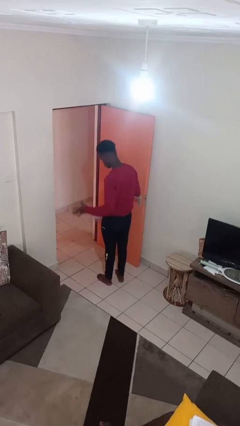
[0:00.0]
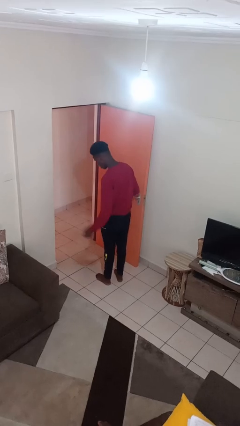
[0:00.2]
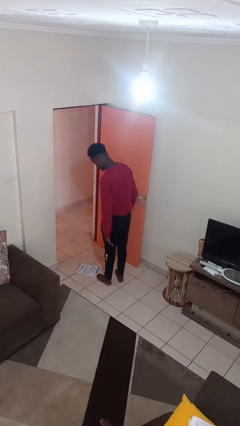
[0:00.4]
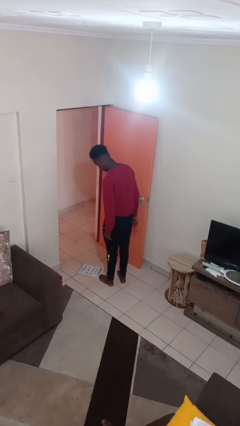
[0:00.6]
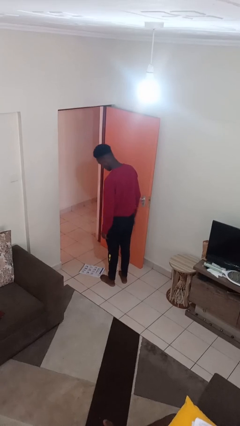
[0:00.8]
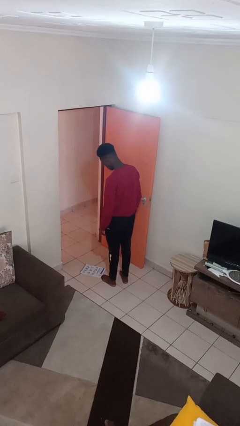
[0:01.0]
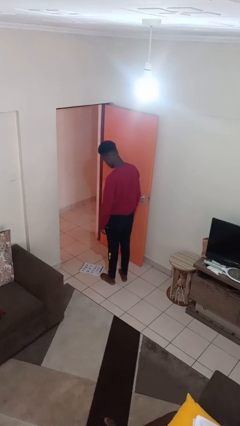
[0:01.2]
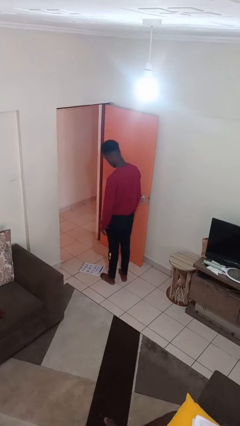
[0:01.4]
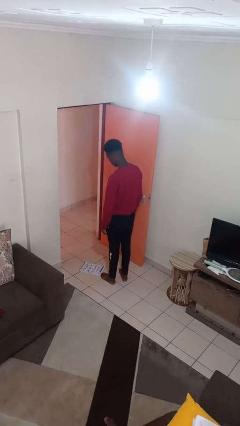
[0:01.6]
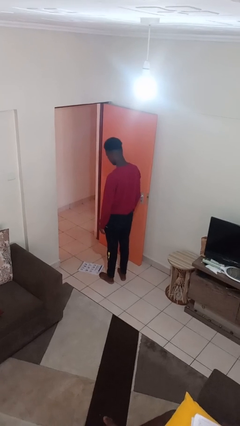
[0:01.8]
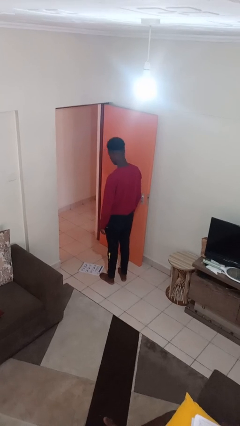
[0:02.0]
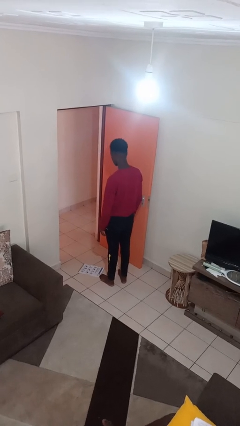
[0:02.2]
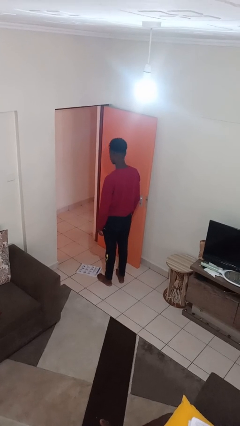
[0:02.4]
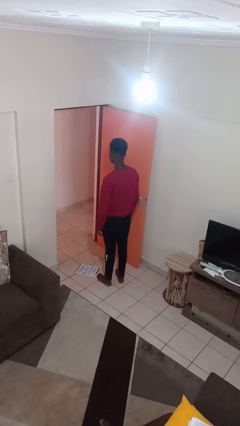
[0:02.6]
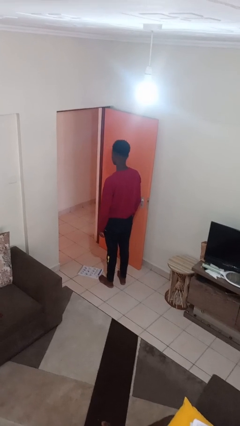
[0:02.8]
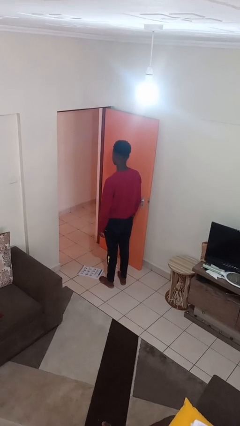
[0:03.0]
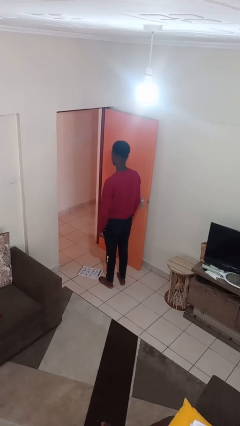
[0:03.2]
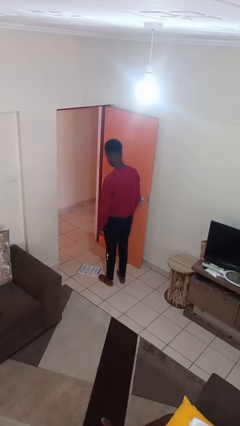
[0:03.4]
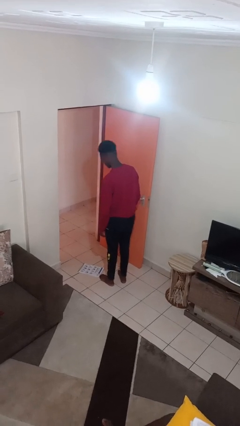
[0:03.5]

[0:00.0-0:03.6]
person drops object

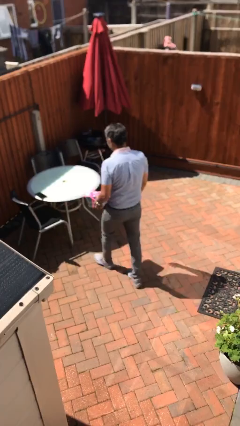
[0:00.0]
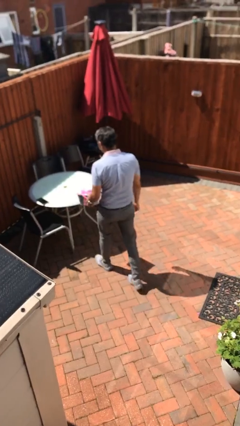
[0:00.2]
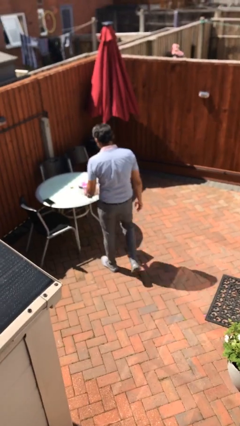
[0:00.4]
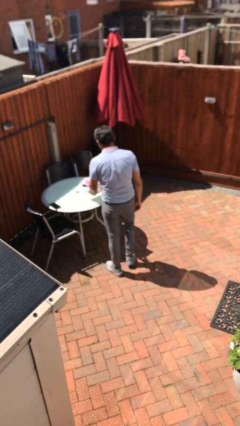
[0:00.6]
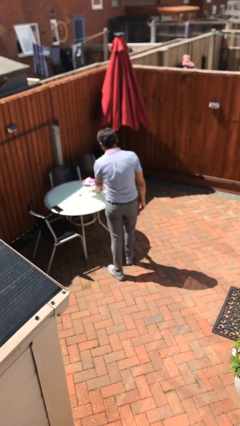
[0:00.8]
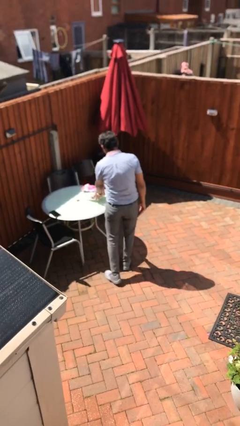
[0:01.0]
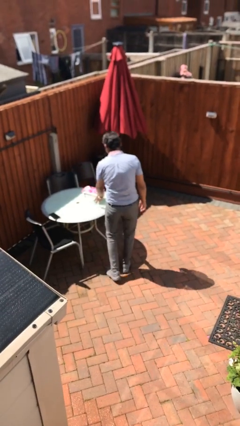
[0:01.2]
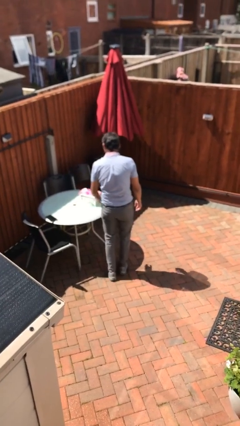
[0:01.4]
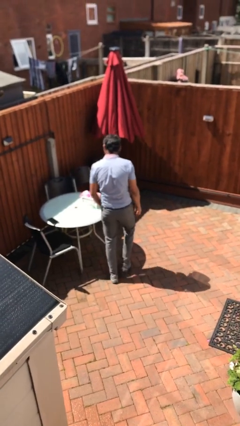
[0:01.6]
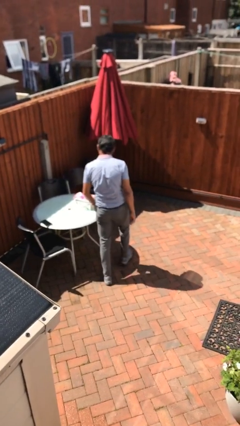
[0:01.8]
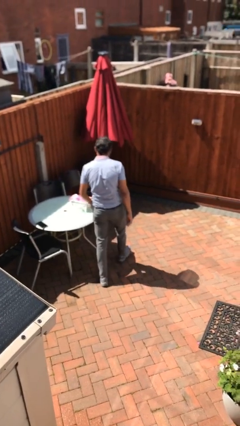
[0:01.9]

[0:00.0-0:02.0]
person puts down object on table

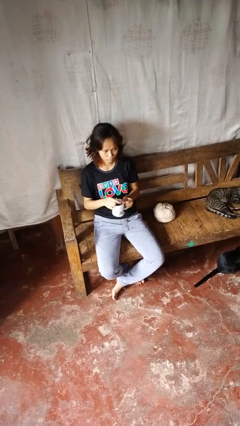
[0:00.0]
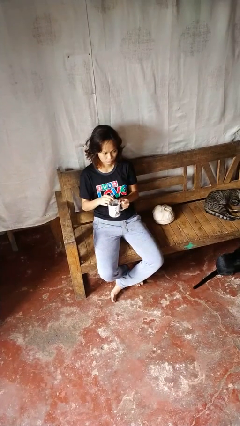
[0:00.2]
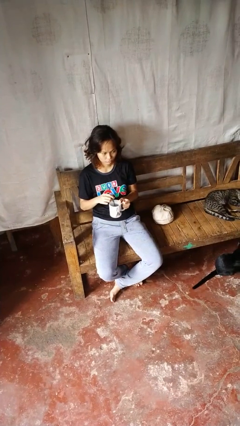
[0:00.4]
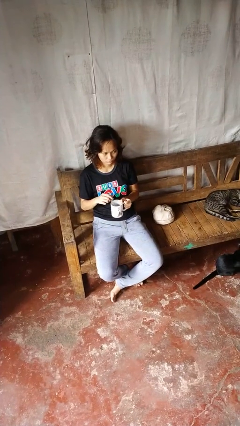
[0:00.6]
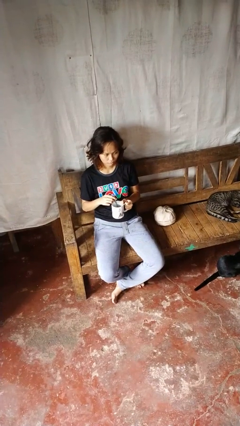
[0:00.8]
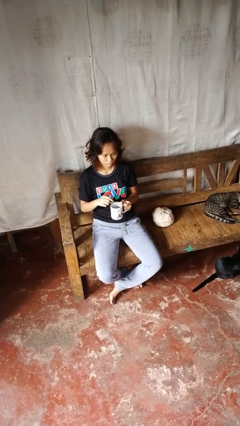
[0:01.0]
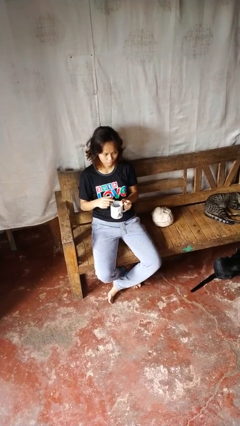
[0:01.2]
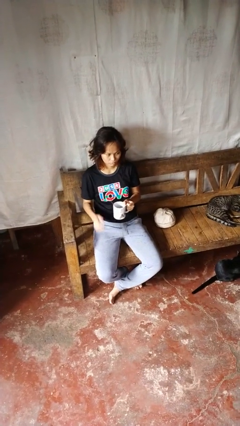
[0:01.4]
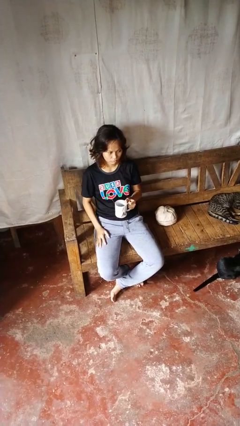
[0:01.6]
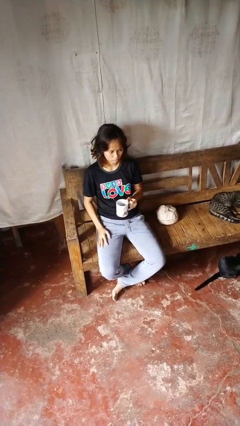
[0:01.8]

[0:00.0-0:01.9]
person stirs mug

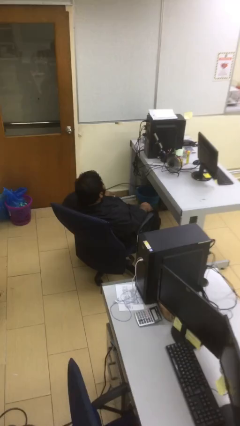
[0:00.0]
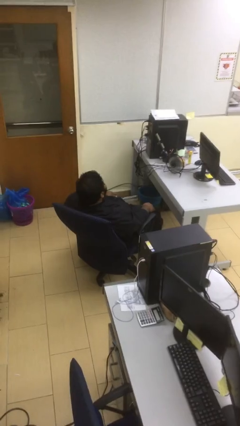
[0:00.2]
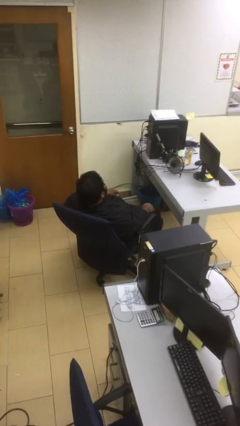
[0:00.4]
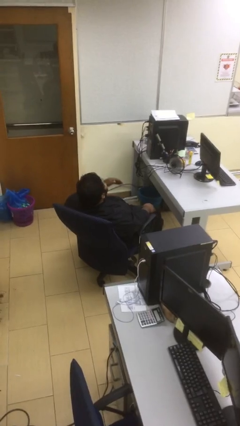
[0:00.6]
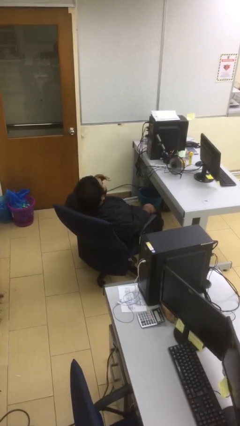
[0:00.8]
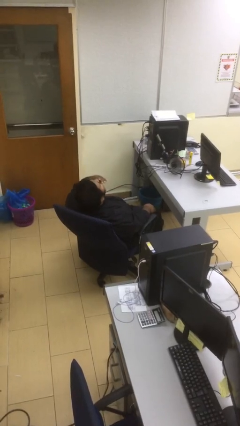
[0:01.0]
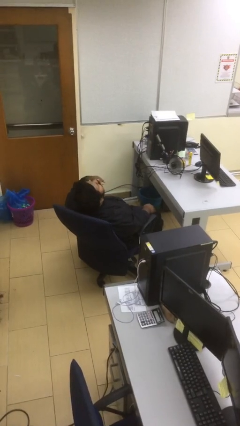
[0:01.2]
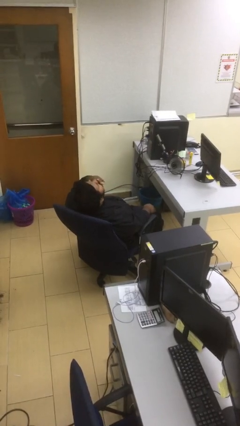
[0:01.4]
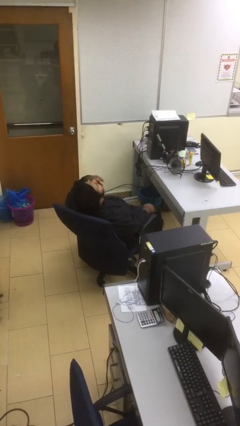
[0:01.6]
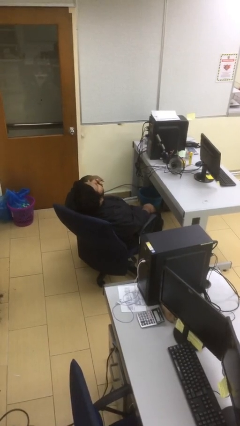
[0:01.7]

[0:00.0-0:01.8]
person yawns

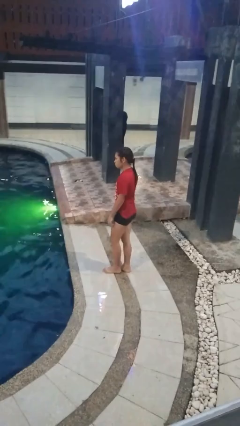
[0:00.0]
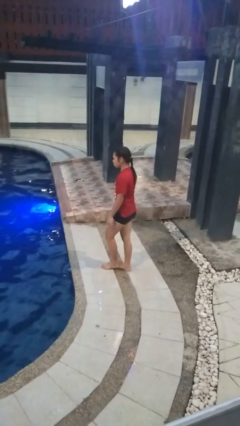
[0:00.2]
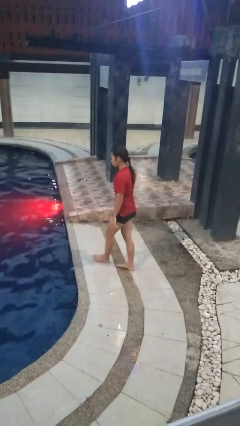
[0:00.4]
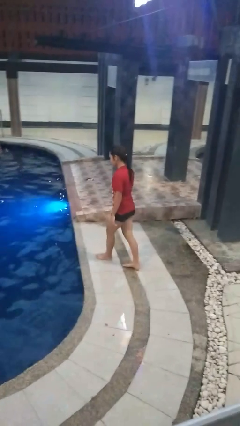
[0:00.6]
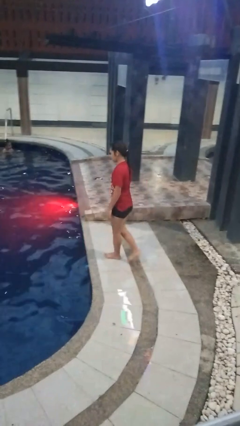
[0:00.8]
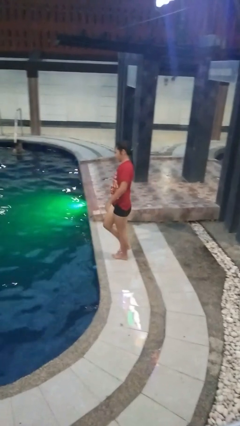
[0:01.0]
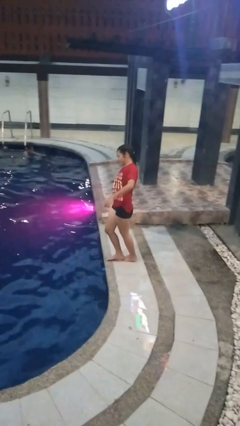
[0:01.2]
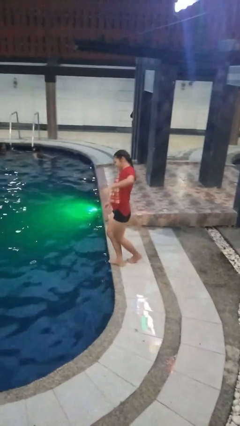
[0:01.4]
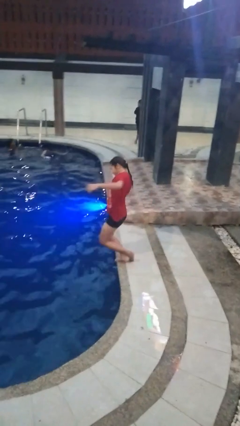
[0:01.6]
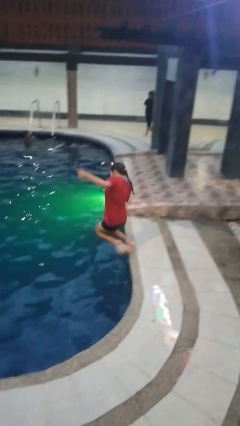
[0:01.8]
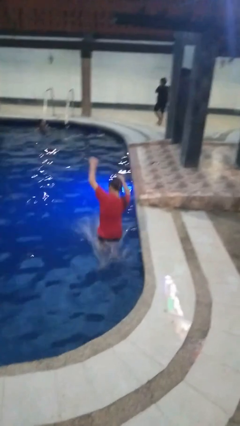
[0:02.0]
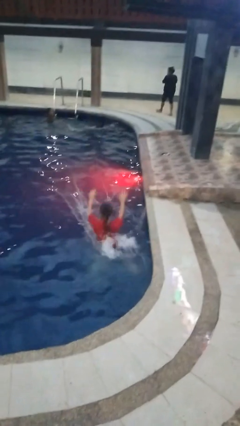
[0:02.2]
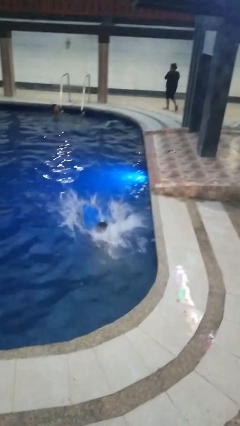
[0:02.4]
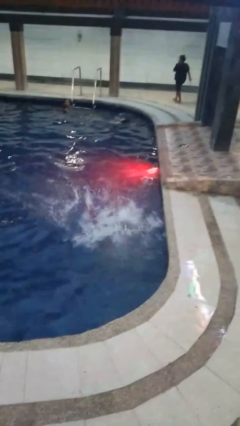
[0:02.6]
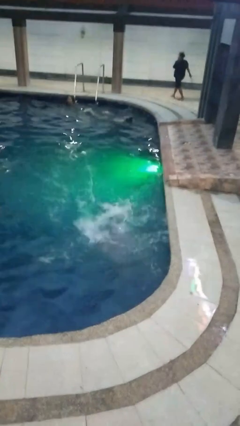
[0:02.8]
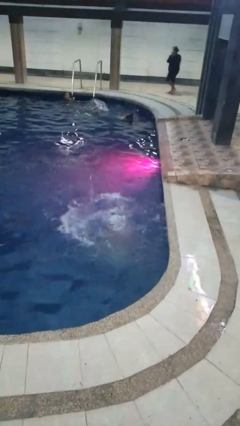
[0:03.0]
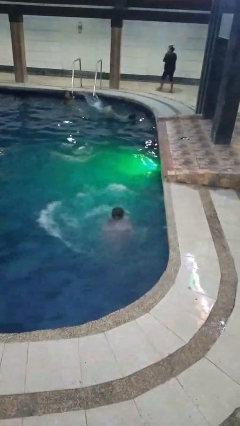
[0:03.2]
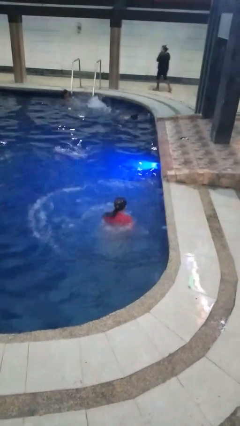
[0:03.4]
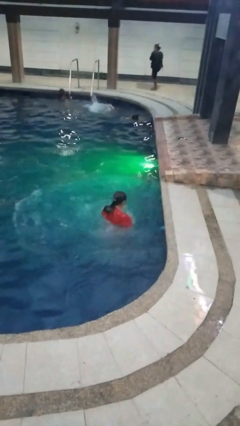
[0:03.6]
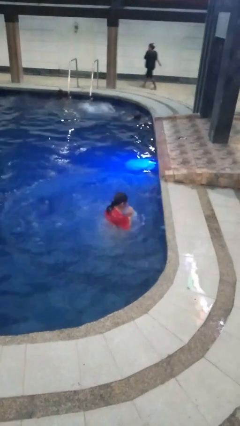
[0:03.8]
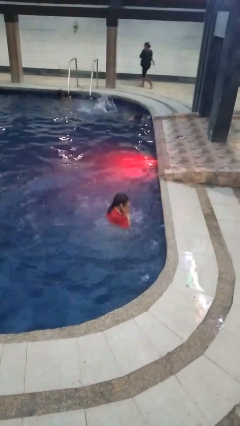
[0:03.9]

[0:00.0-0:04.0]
person falls into pool

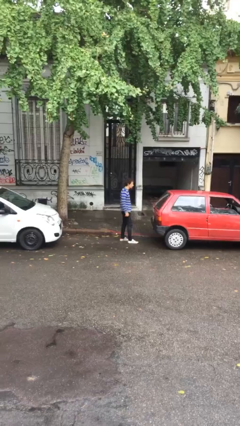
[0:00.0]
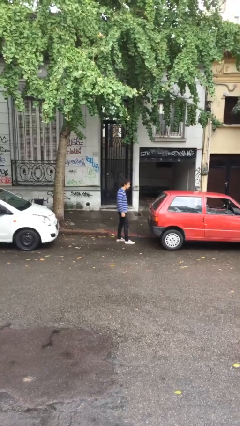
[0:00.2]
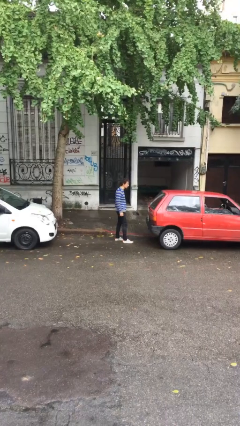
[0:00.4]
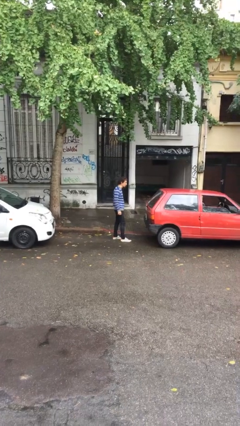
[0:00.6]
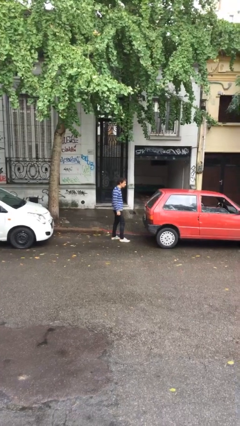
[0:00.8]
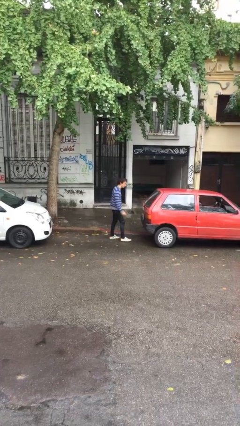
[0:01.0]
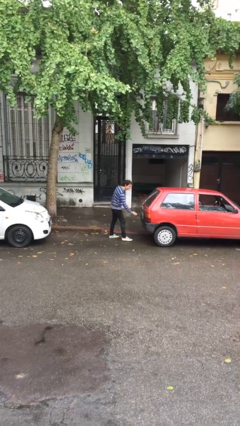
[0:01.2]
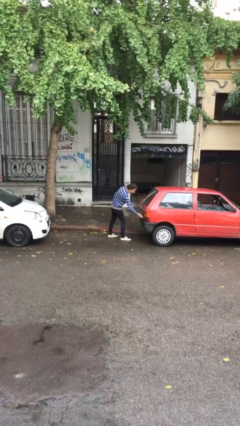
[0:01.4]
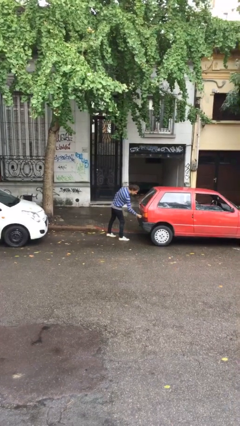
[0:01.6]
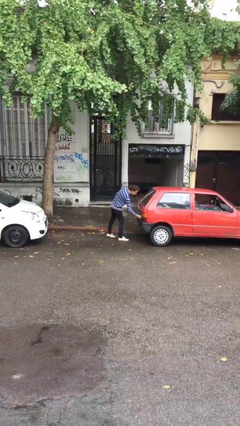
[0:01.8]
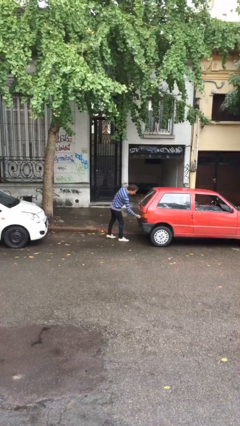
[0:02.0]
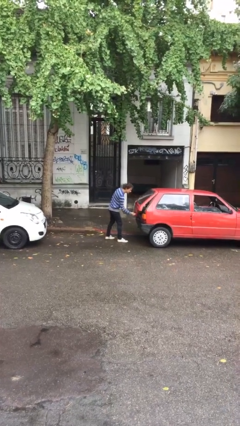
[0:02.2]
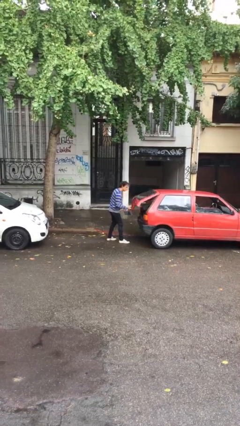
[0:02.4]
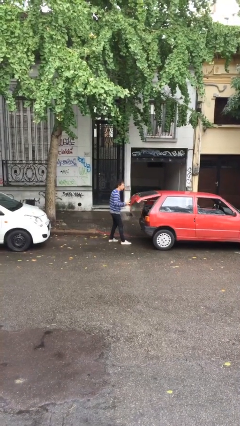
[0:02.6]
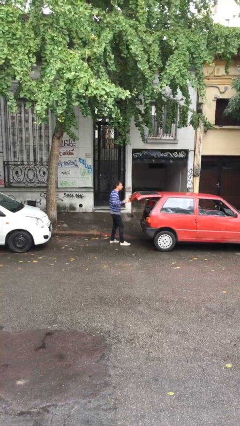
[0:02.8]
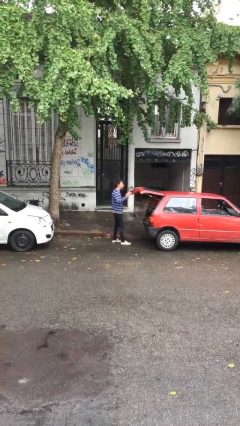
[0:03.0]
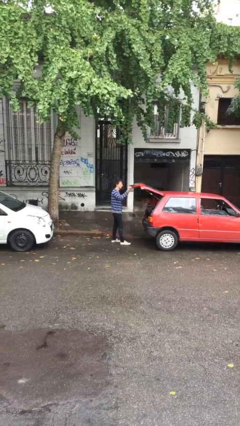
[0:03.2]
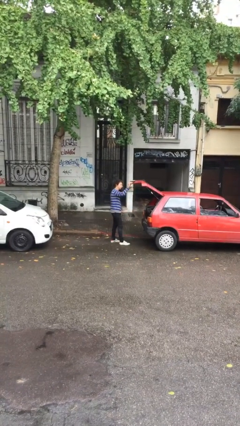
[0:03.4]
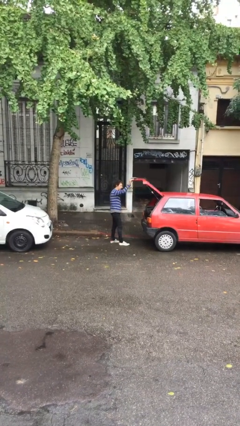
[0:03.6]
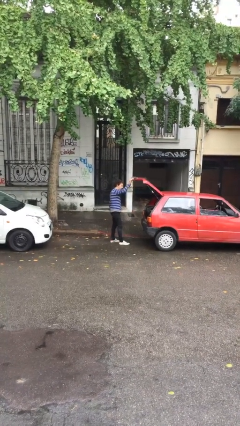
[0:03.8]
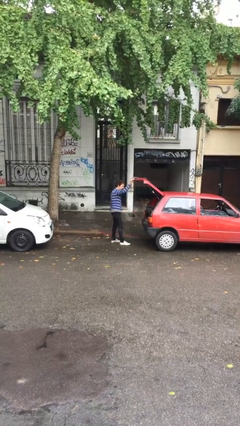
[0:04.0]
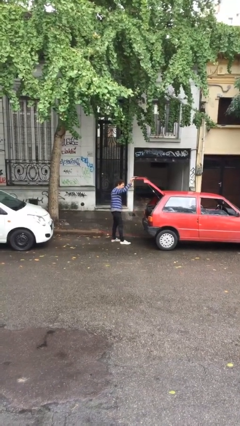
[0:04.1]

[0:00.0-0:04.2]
person opens car trunk
